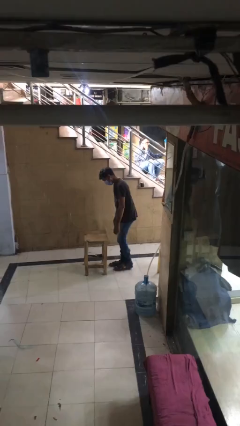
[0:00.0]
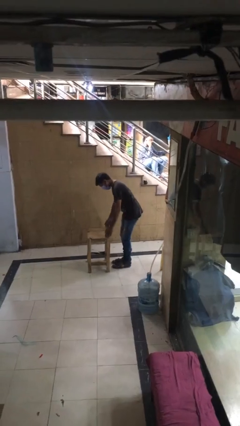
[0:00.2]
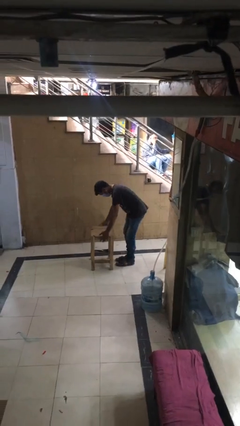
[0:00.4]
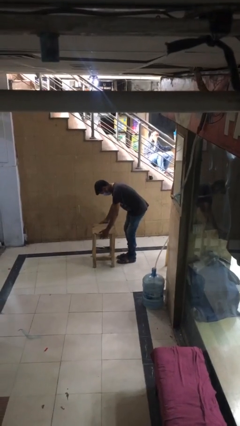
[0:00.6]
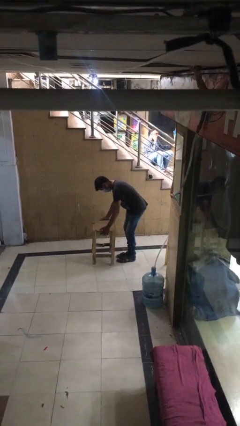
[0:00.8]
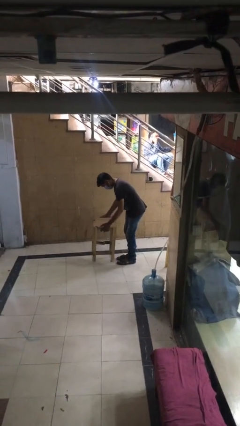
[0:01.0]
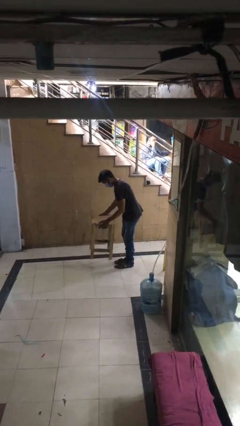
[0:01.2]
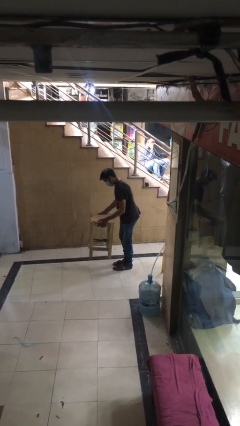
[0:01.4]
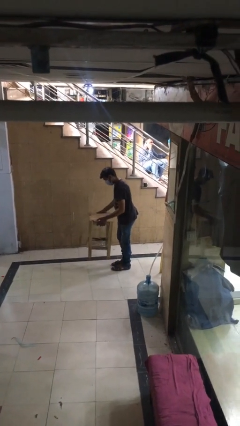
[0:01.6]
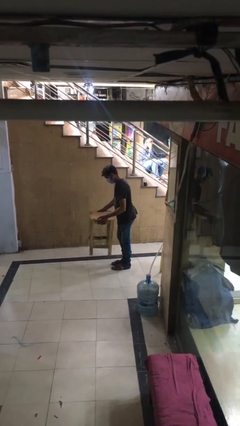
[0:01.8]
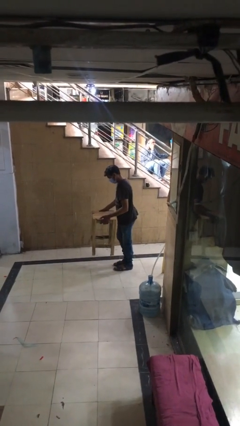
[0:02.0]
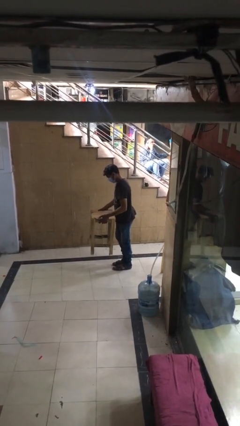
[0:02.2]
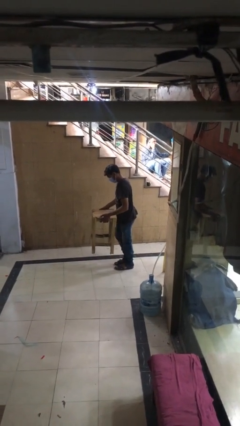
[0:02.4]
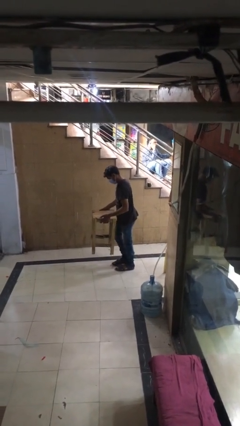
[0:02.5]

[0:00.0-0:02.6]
person picks up object from floor

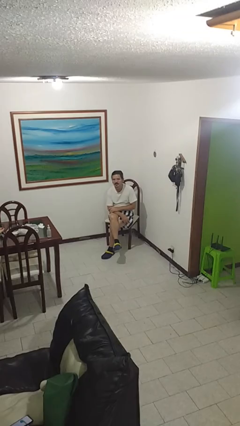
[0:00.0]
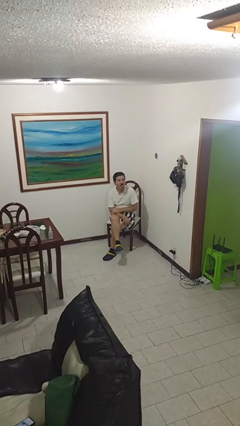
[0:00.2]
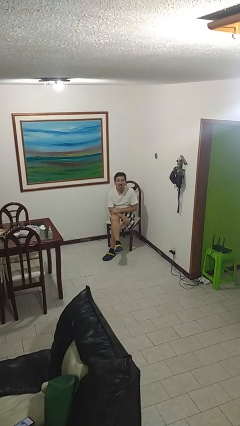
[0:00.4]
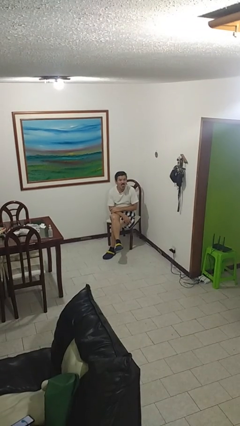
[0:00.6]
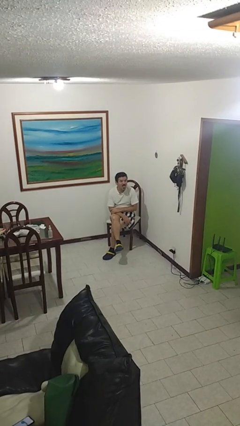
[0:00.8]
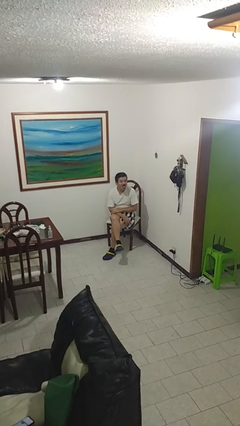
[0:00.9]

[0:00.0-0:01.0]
person sticks out tongue

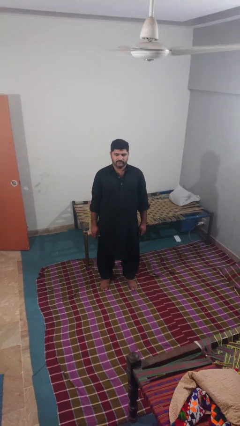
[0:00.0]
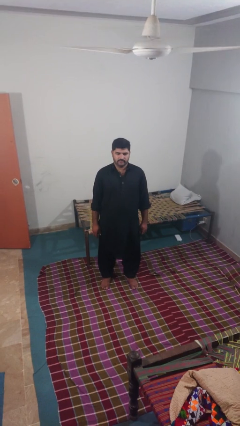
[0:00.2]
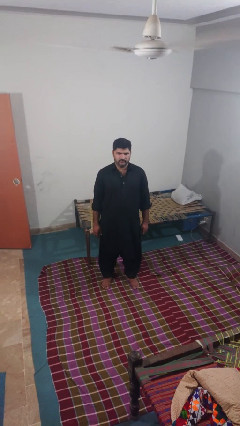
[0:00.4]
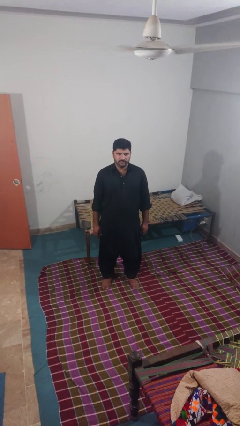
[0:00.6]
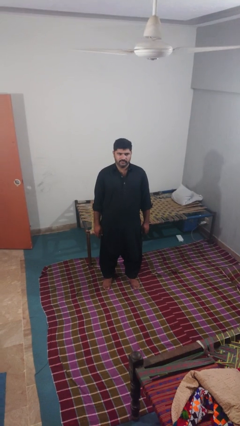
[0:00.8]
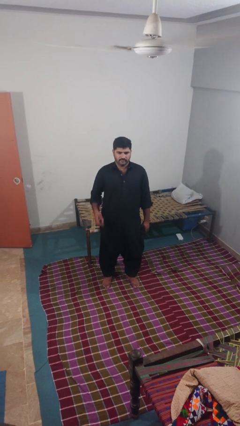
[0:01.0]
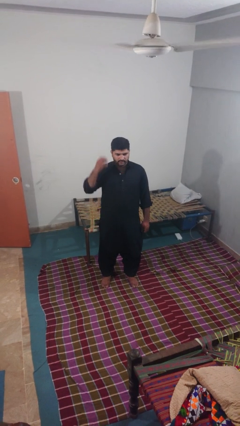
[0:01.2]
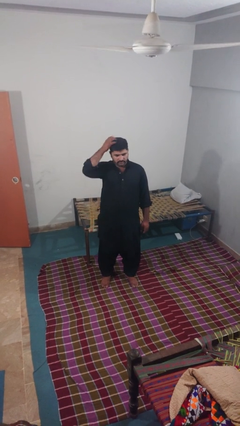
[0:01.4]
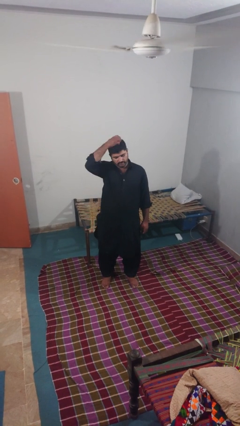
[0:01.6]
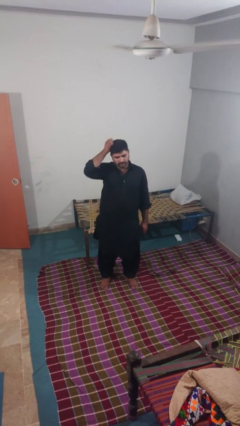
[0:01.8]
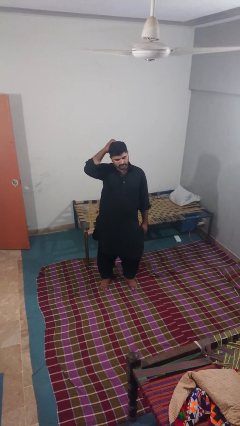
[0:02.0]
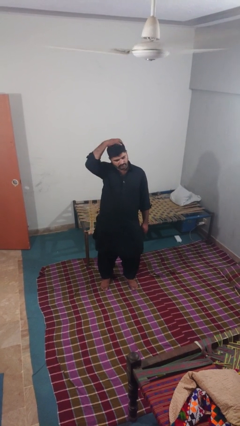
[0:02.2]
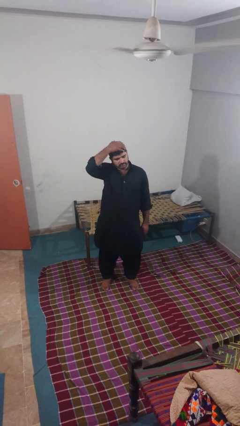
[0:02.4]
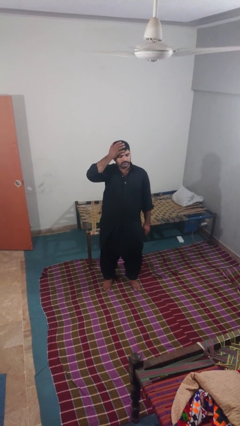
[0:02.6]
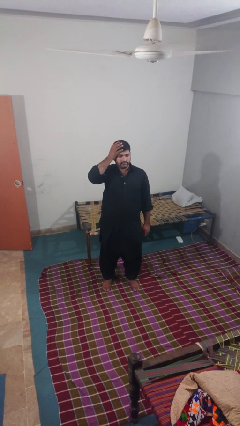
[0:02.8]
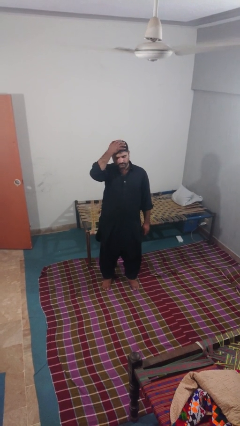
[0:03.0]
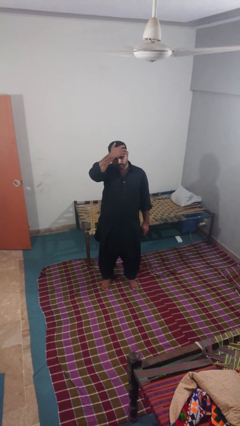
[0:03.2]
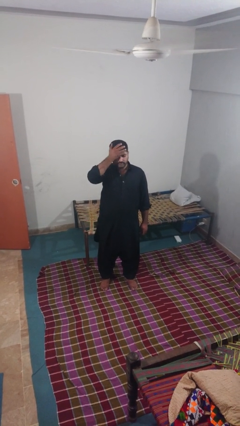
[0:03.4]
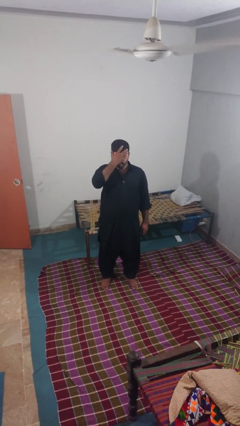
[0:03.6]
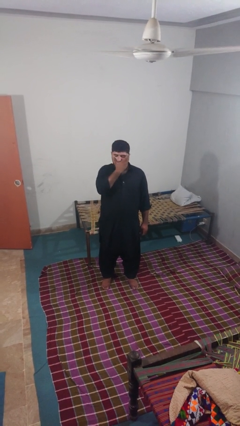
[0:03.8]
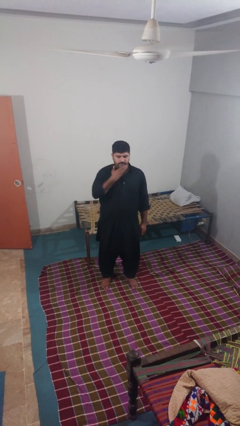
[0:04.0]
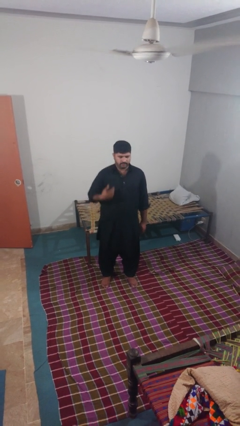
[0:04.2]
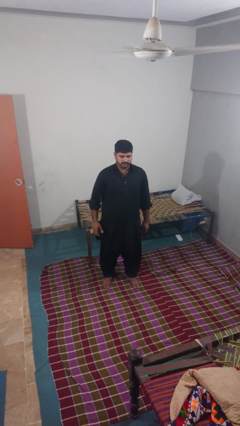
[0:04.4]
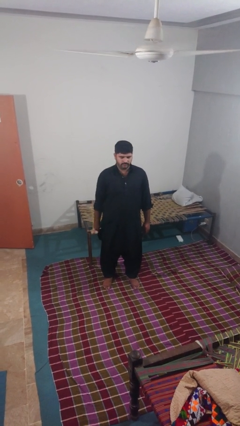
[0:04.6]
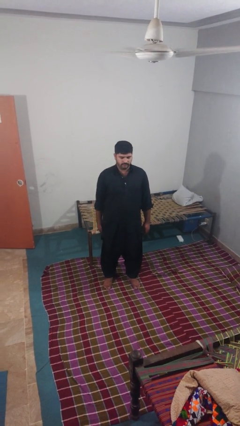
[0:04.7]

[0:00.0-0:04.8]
person scratches face

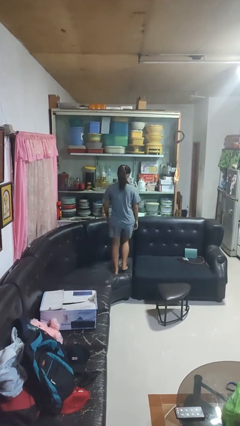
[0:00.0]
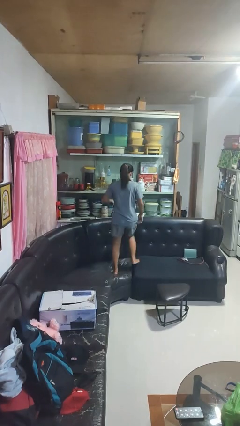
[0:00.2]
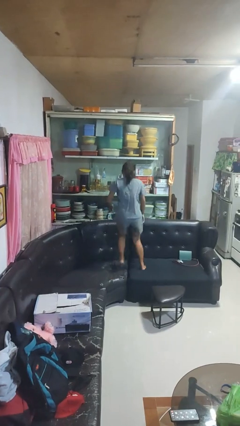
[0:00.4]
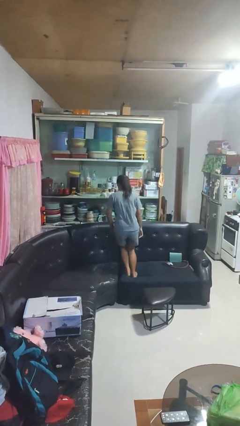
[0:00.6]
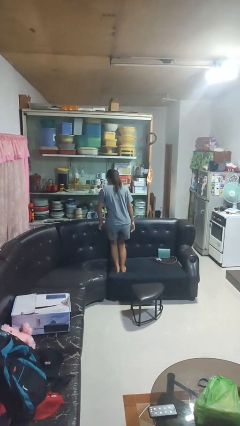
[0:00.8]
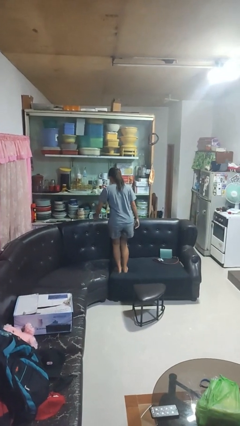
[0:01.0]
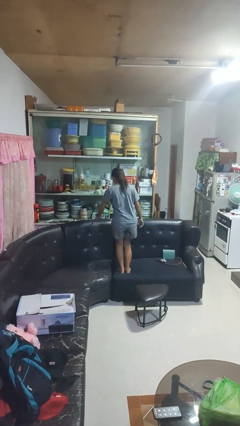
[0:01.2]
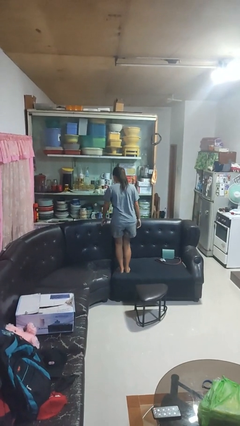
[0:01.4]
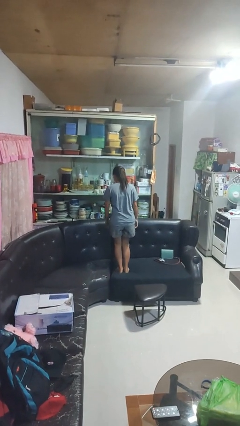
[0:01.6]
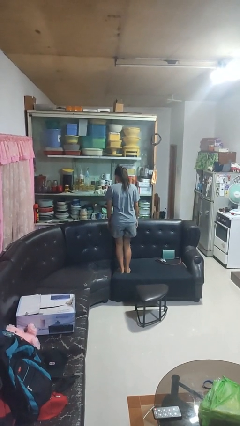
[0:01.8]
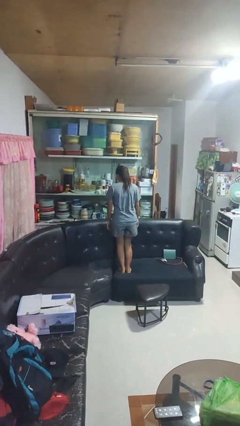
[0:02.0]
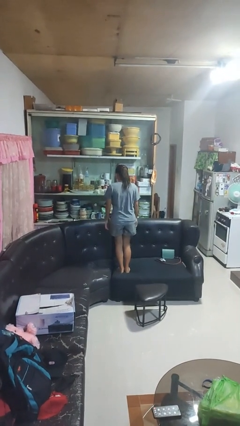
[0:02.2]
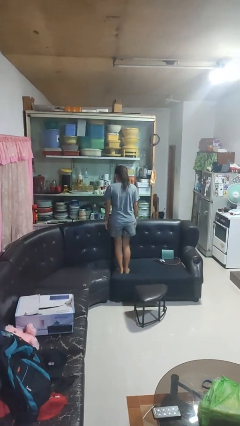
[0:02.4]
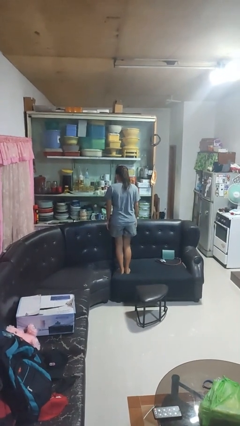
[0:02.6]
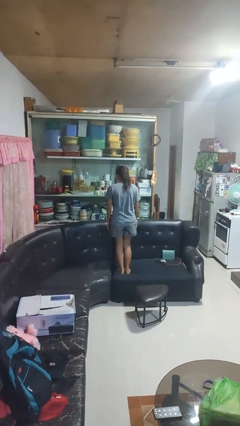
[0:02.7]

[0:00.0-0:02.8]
person jumps on couch

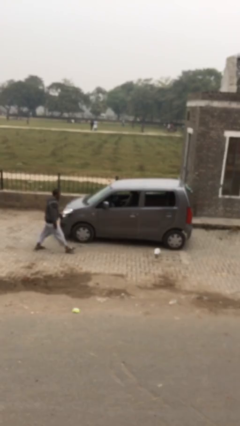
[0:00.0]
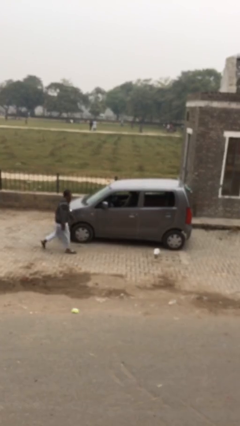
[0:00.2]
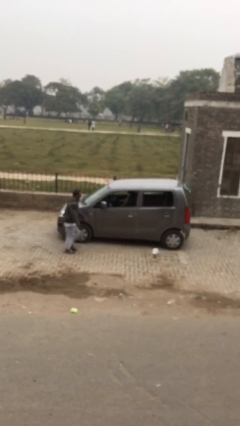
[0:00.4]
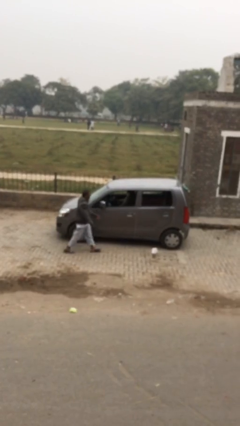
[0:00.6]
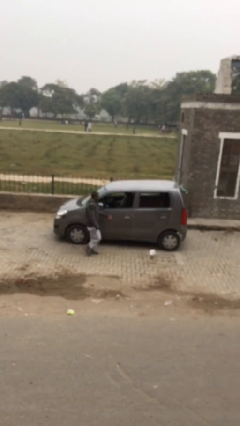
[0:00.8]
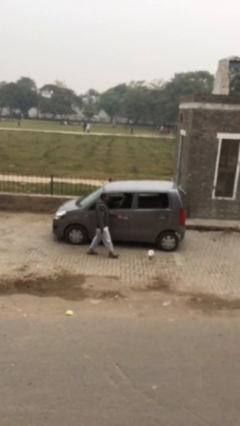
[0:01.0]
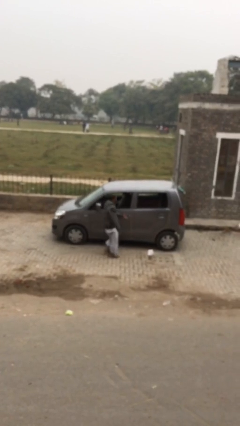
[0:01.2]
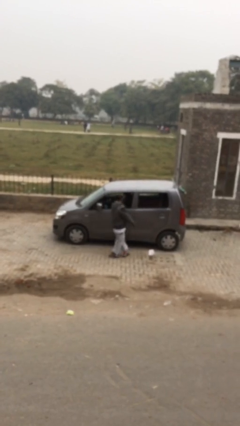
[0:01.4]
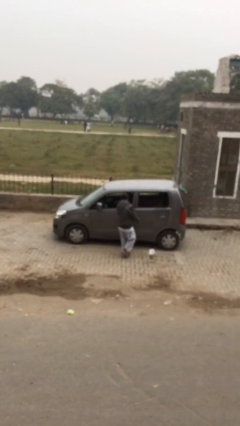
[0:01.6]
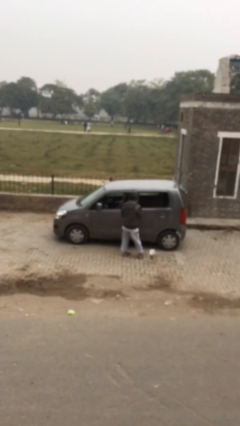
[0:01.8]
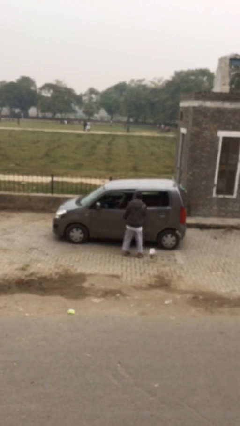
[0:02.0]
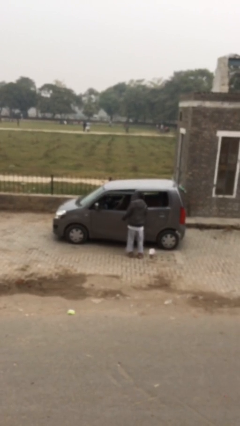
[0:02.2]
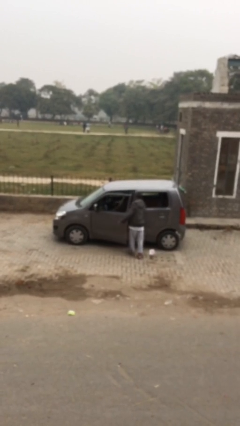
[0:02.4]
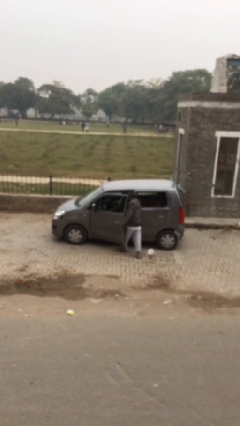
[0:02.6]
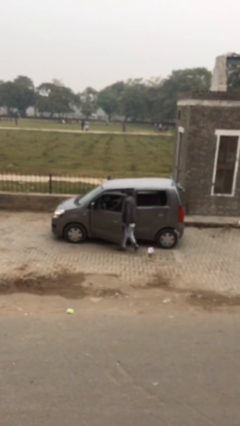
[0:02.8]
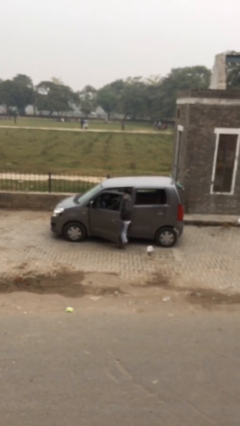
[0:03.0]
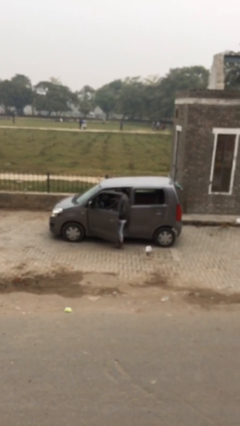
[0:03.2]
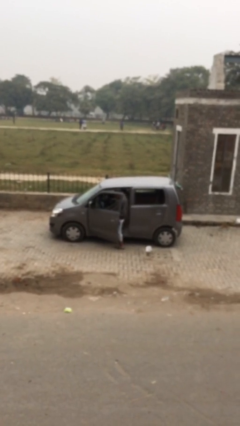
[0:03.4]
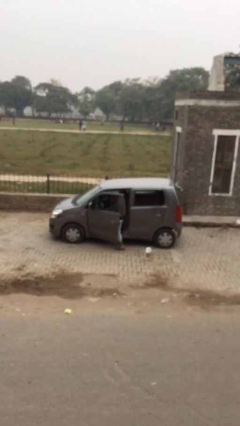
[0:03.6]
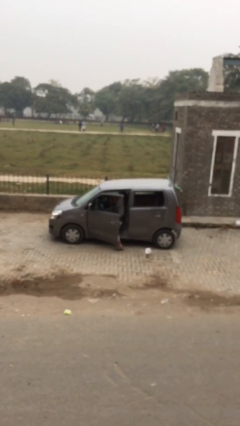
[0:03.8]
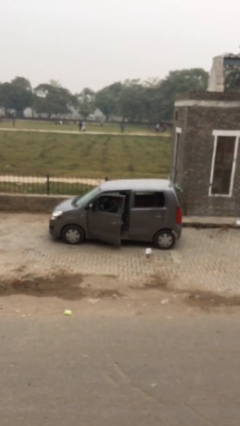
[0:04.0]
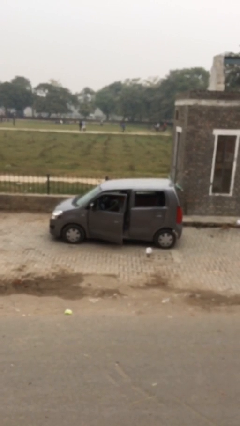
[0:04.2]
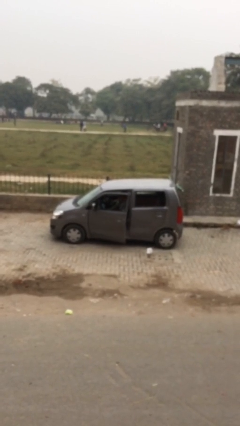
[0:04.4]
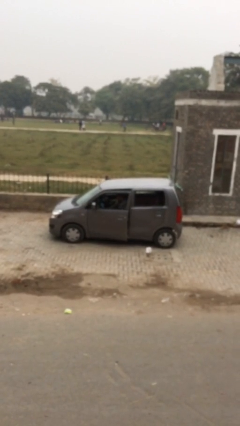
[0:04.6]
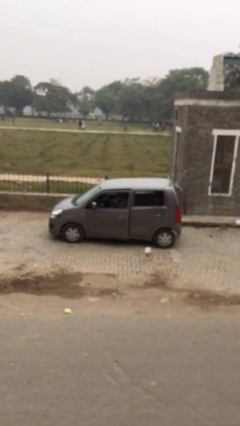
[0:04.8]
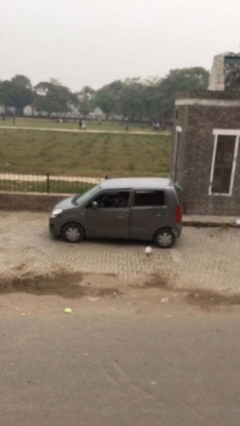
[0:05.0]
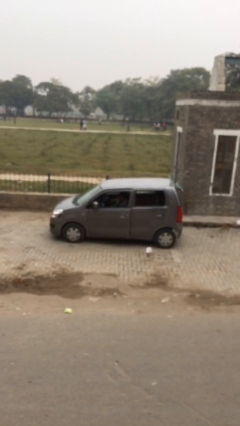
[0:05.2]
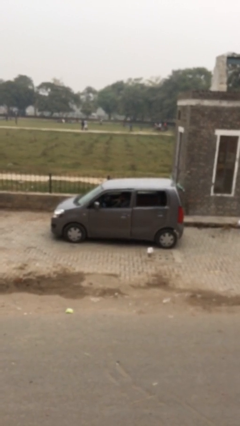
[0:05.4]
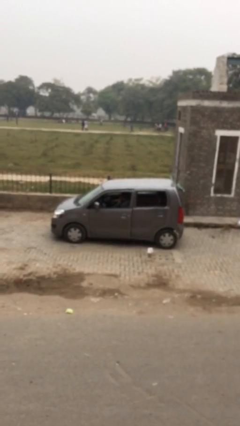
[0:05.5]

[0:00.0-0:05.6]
car picks up person

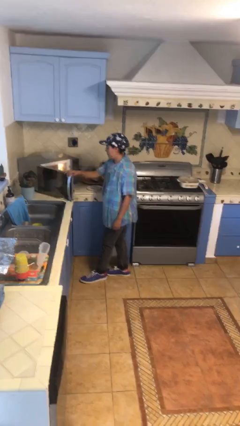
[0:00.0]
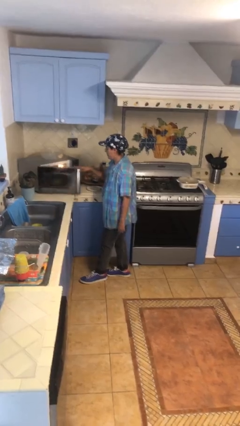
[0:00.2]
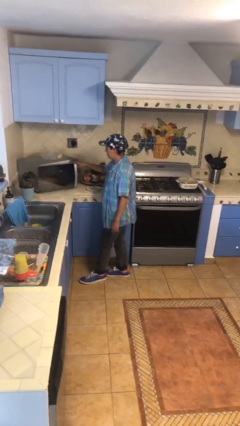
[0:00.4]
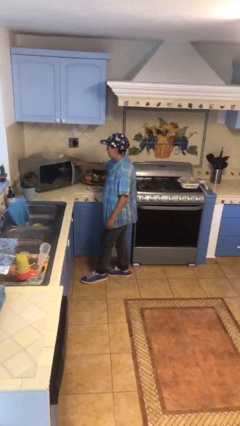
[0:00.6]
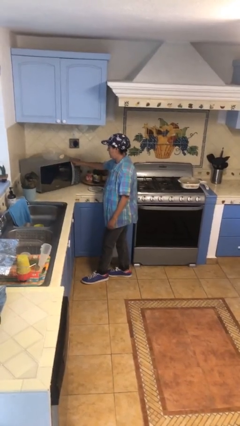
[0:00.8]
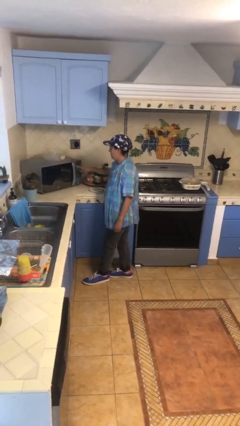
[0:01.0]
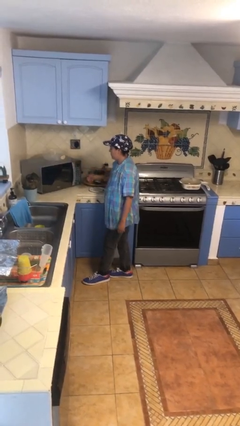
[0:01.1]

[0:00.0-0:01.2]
person closes microwave
